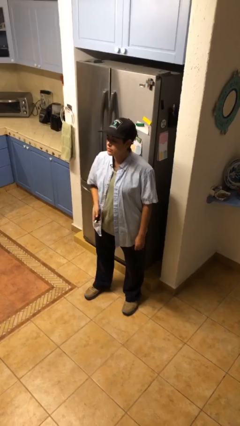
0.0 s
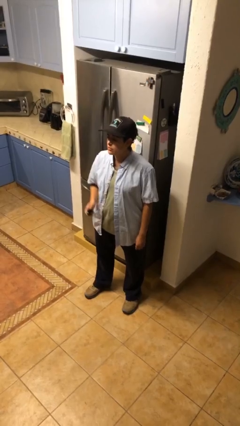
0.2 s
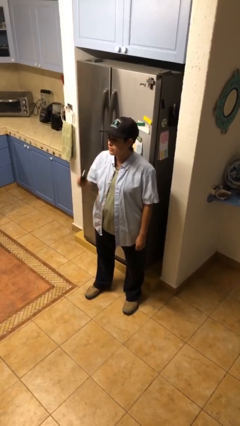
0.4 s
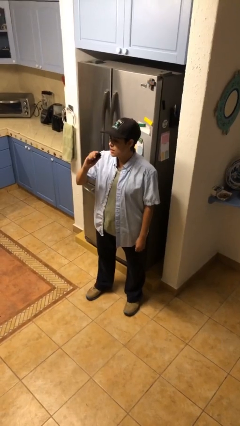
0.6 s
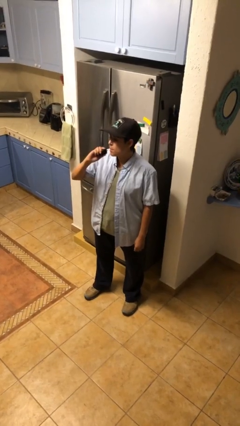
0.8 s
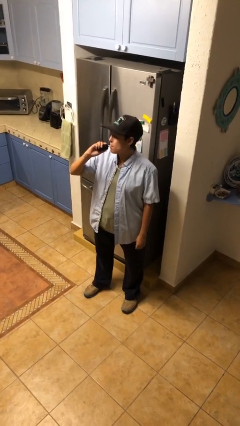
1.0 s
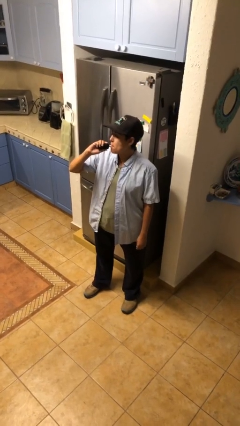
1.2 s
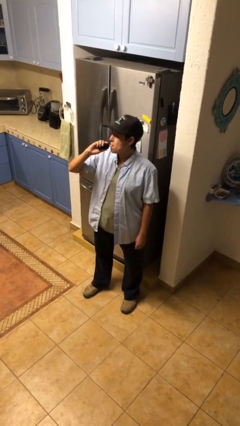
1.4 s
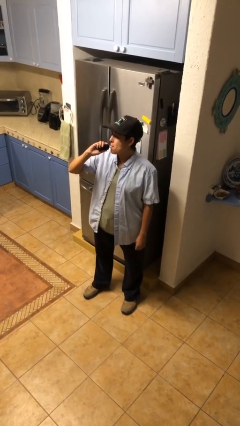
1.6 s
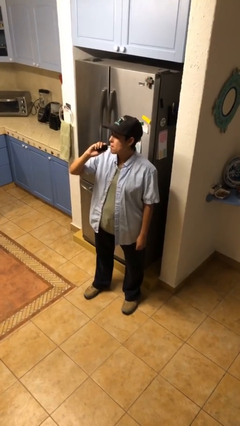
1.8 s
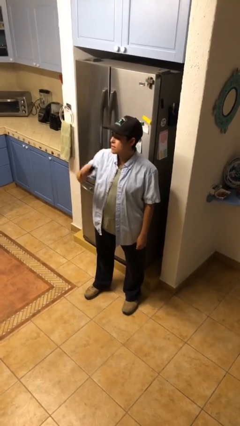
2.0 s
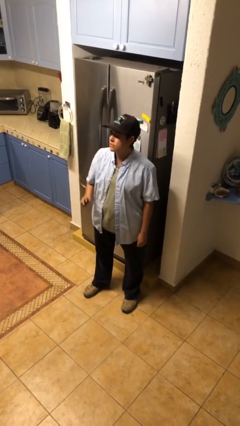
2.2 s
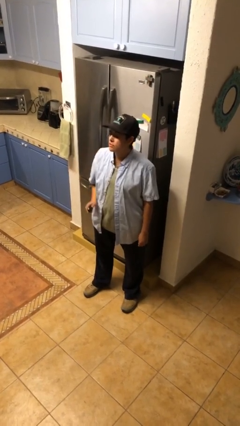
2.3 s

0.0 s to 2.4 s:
person vapes

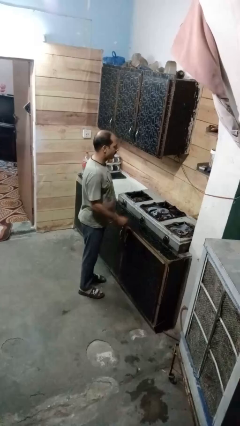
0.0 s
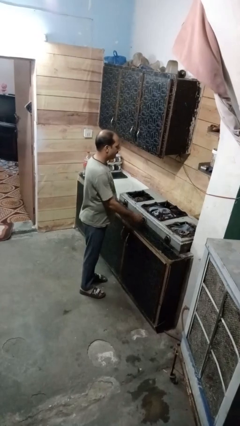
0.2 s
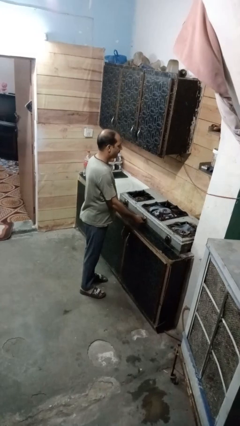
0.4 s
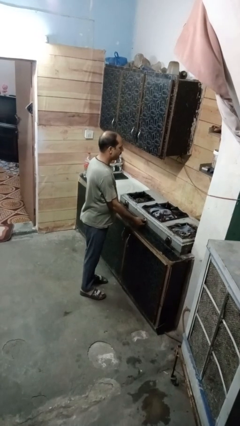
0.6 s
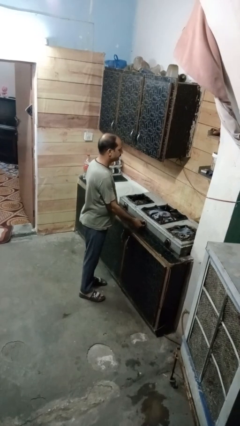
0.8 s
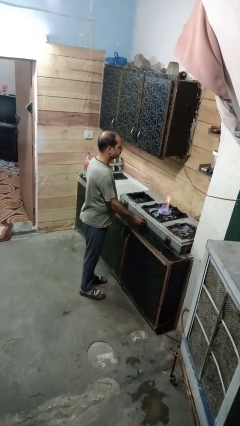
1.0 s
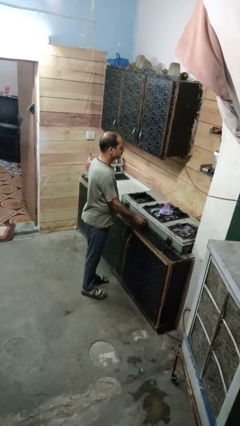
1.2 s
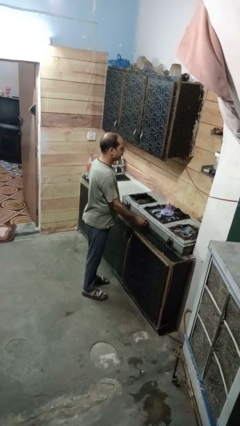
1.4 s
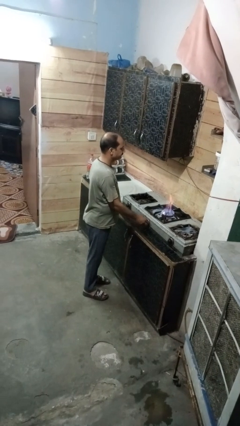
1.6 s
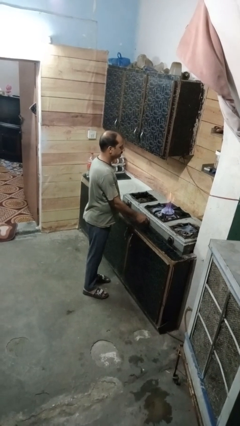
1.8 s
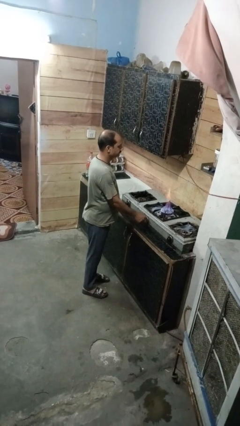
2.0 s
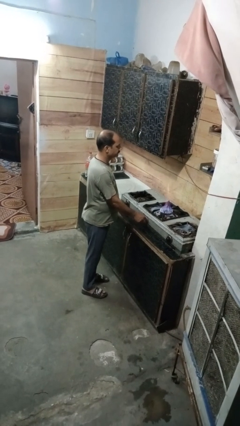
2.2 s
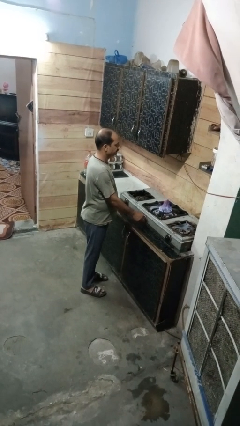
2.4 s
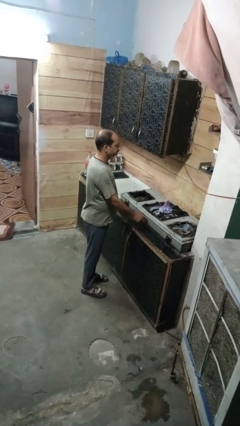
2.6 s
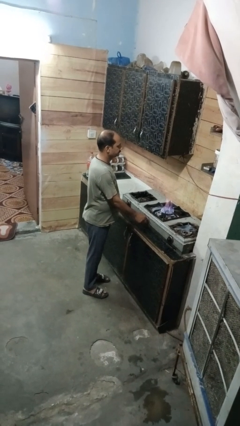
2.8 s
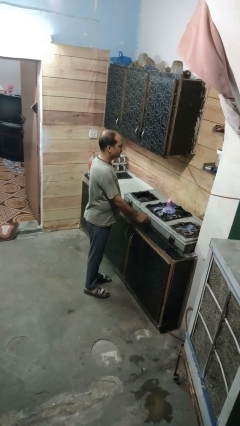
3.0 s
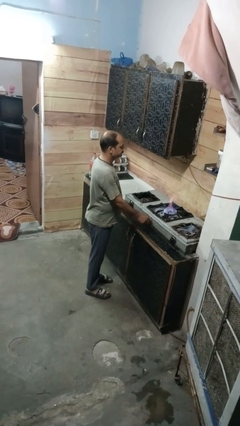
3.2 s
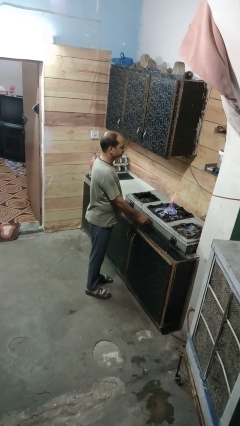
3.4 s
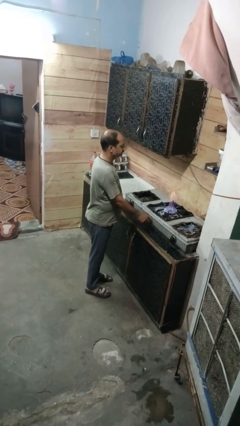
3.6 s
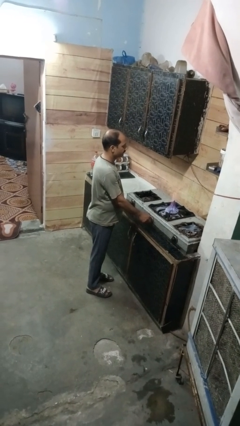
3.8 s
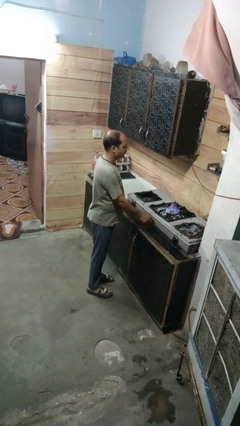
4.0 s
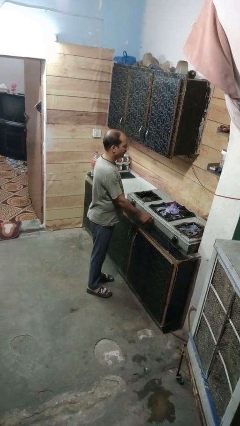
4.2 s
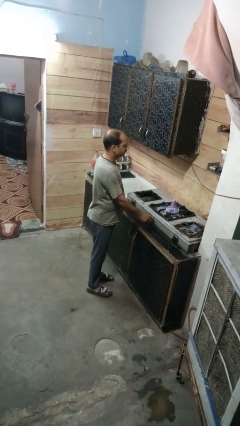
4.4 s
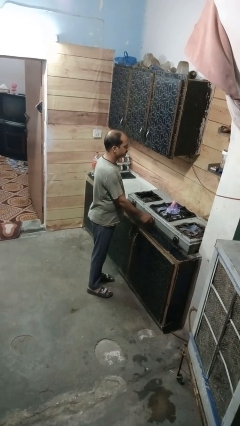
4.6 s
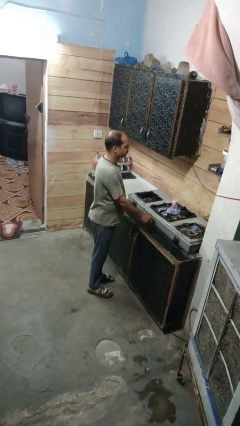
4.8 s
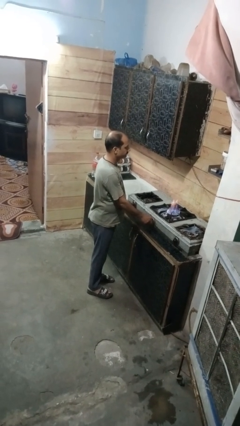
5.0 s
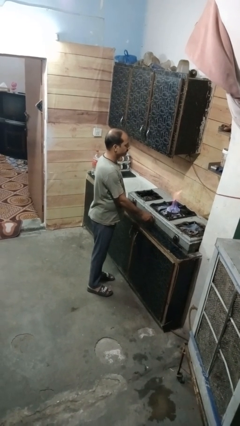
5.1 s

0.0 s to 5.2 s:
person turns on stovetop

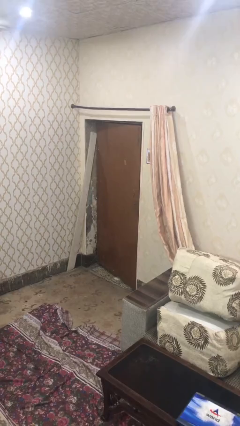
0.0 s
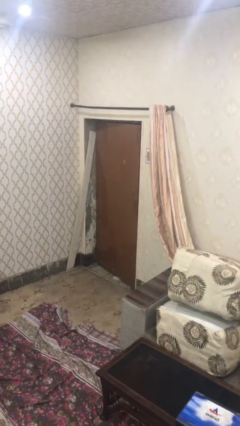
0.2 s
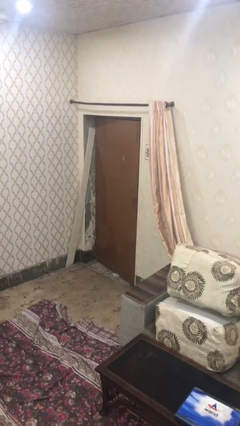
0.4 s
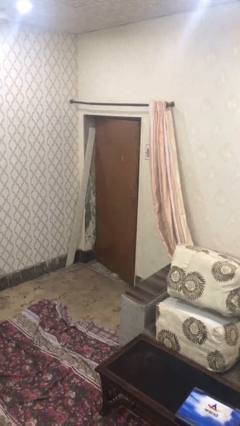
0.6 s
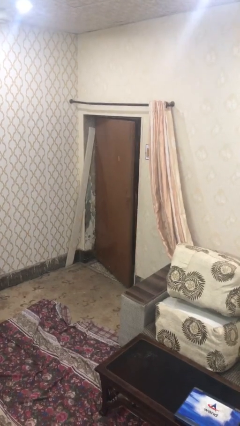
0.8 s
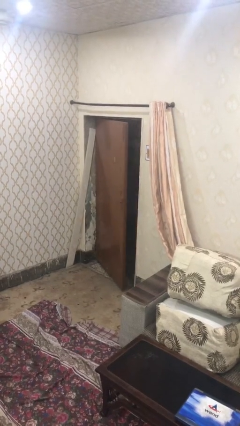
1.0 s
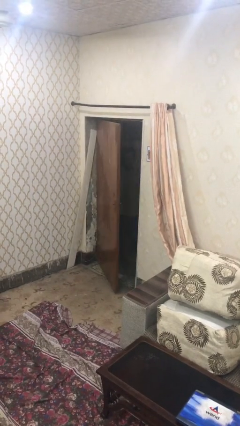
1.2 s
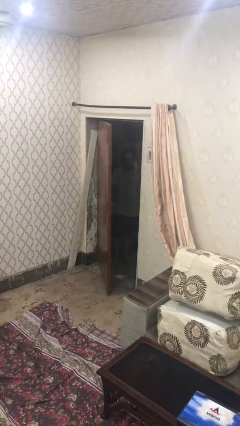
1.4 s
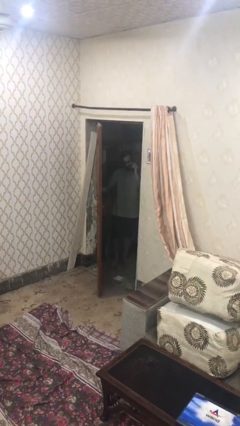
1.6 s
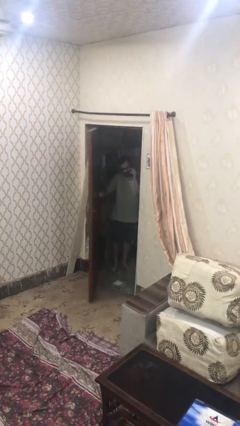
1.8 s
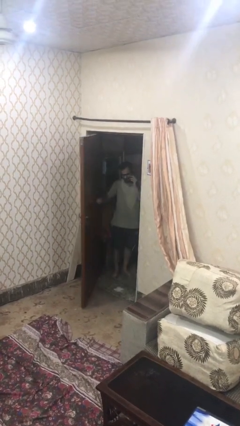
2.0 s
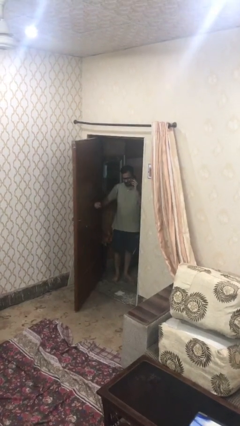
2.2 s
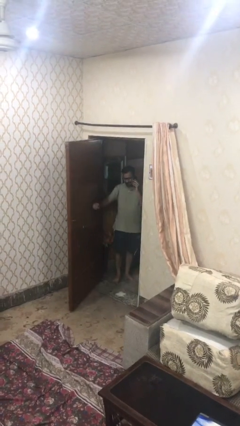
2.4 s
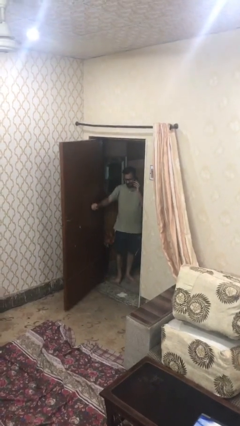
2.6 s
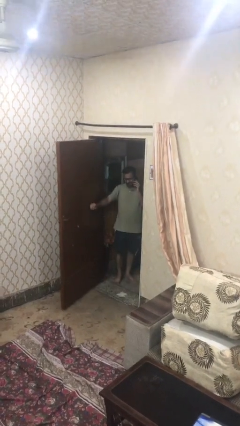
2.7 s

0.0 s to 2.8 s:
person opens facility door

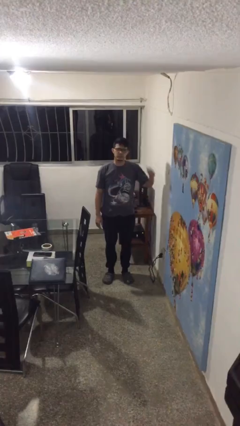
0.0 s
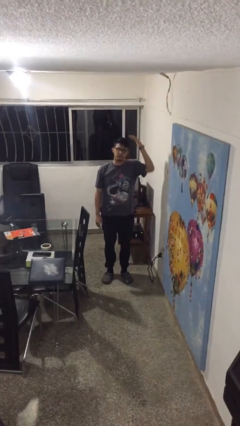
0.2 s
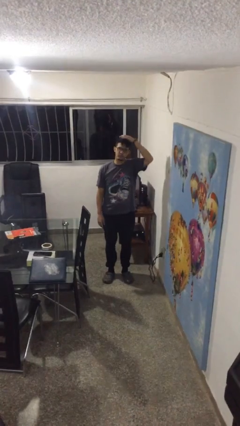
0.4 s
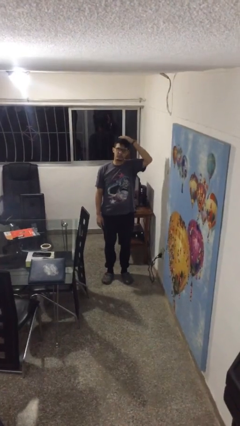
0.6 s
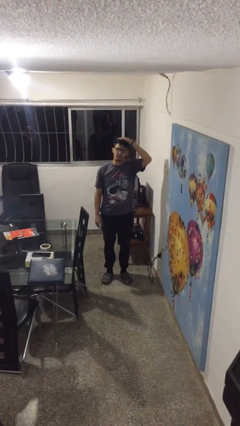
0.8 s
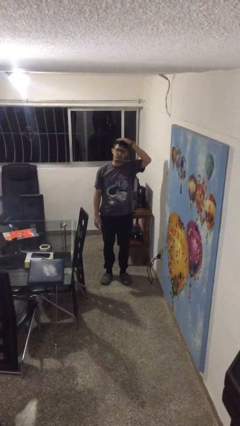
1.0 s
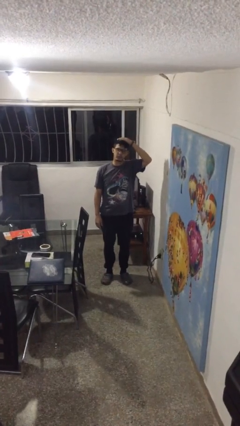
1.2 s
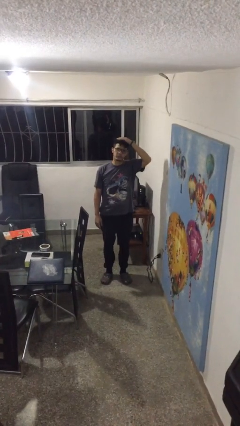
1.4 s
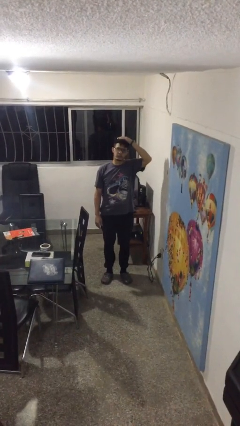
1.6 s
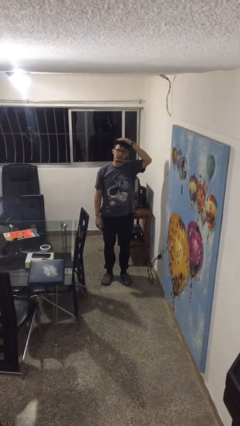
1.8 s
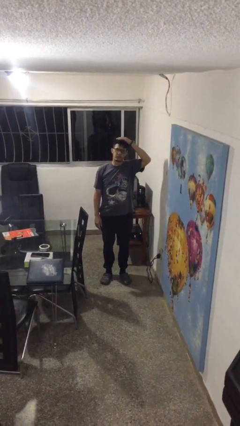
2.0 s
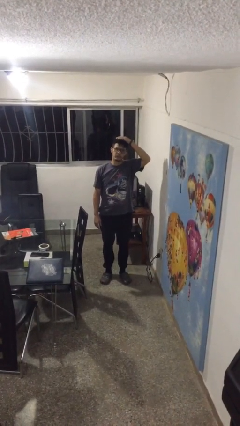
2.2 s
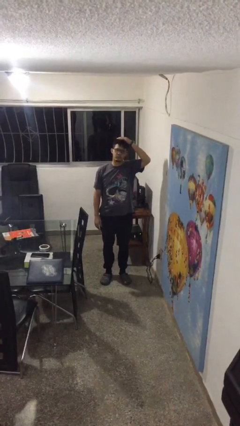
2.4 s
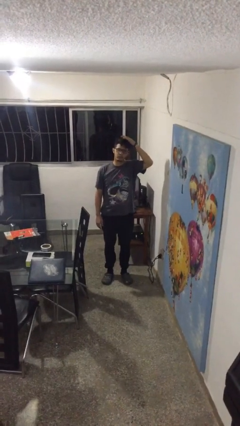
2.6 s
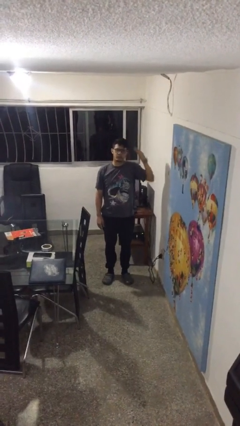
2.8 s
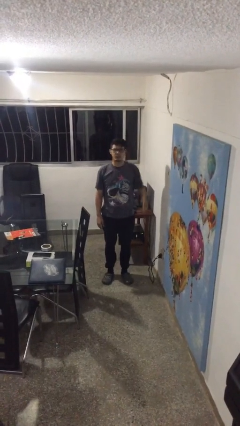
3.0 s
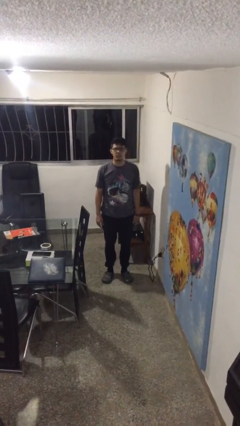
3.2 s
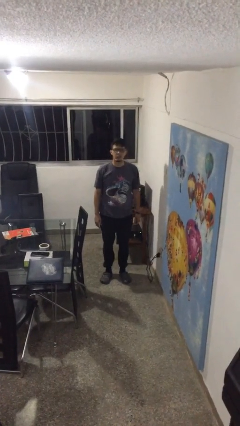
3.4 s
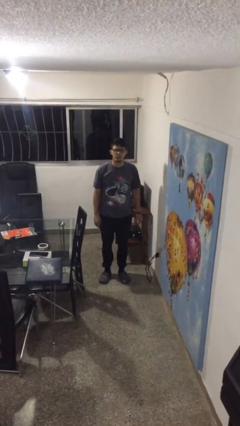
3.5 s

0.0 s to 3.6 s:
person pats head

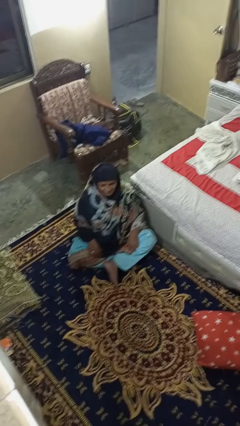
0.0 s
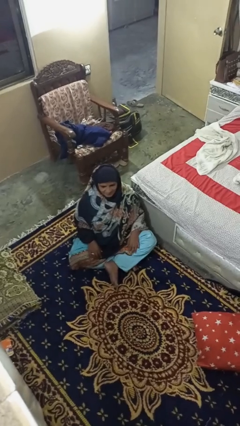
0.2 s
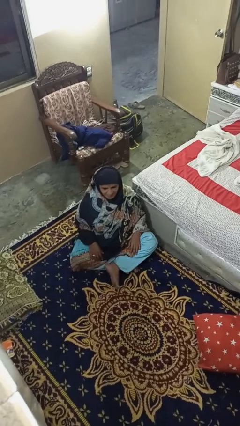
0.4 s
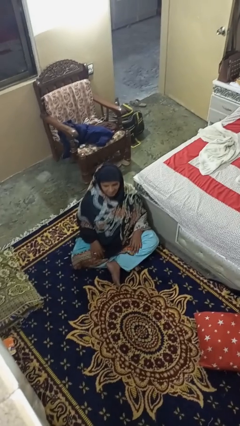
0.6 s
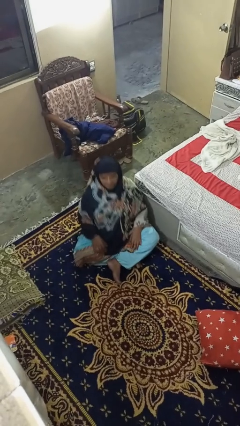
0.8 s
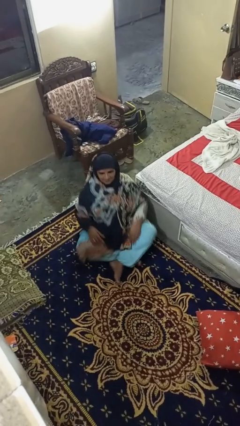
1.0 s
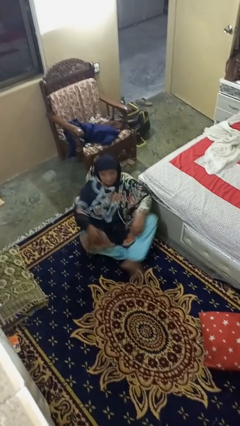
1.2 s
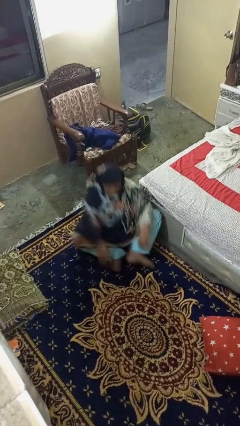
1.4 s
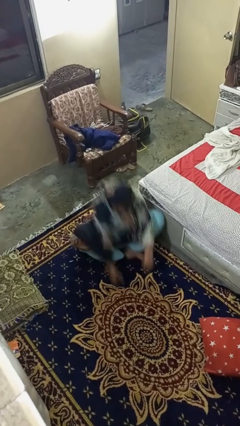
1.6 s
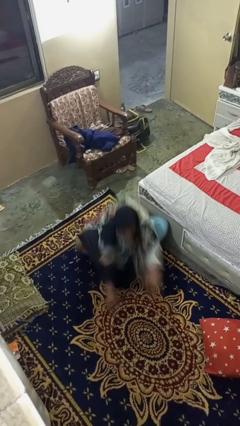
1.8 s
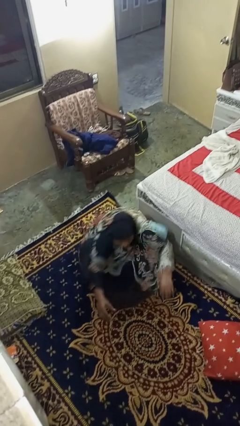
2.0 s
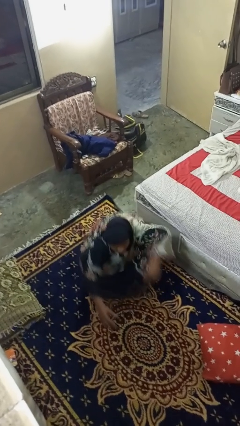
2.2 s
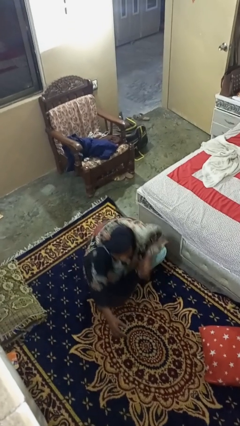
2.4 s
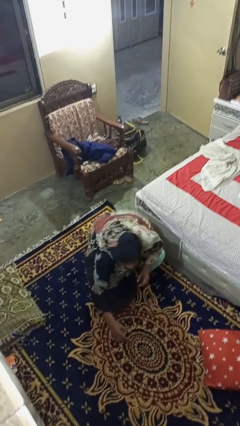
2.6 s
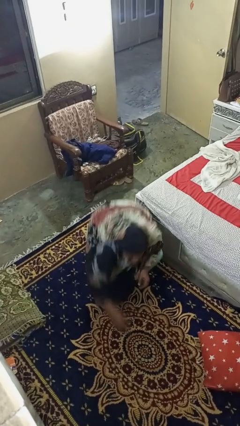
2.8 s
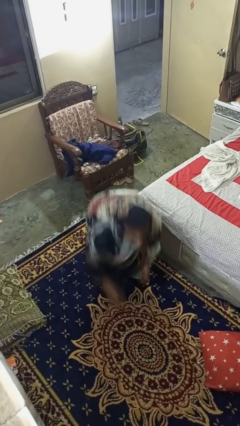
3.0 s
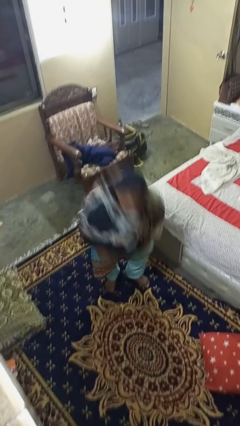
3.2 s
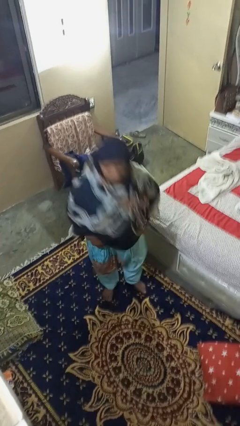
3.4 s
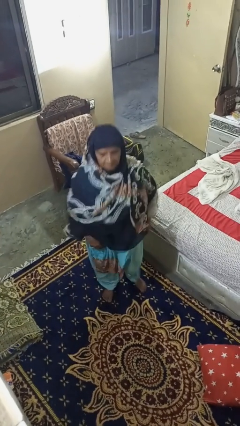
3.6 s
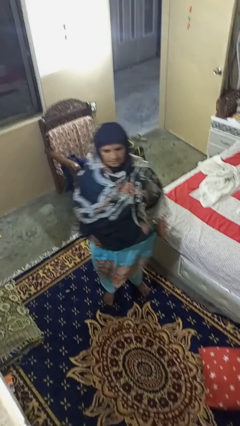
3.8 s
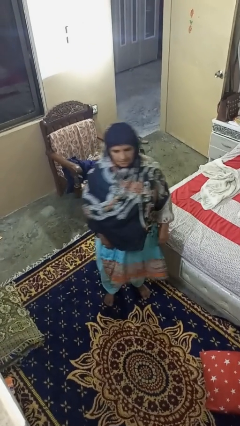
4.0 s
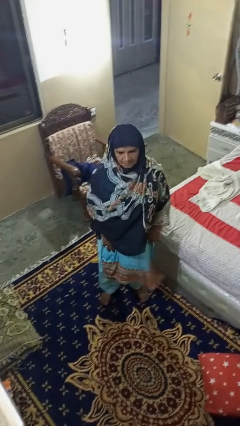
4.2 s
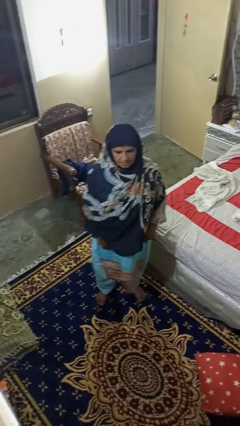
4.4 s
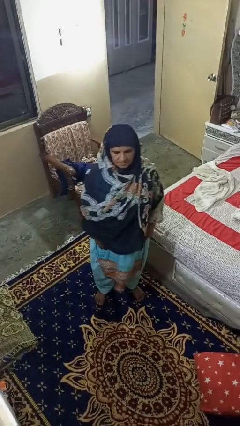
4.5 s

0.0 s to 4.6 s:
person stands up from floor
